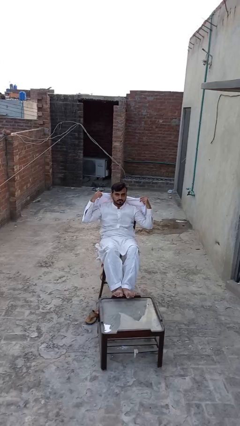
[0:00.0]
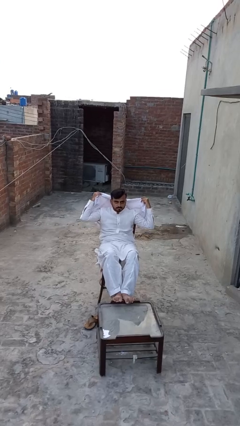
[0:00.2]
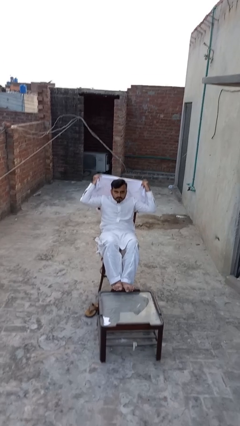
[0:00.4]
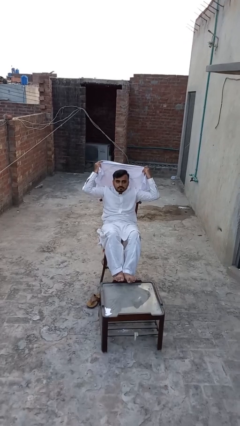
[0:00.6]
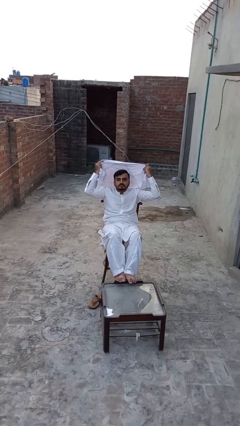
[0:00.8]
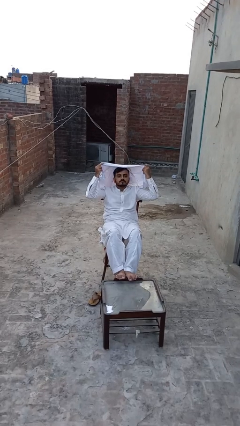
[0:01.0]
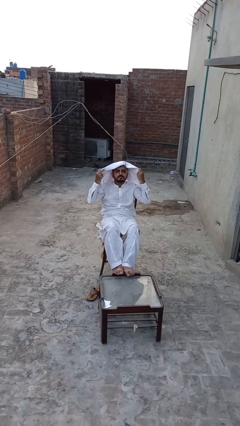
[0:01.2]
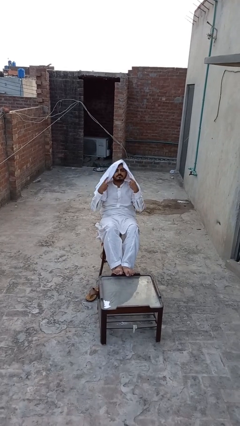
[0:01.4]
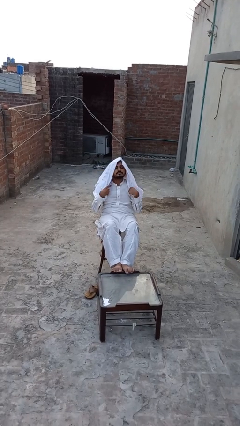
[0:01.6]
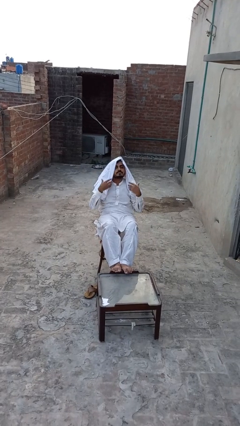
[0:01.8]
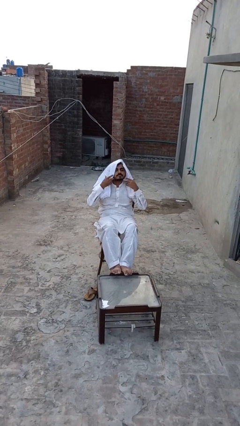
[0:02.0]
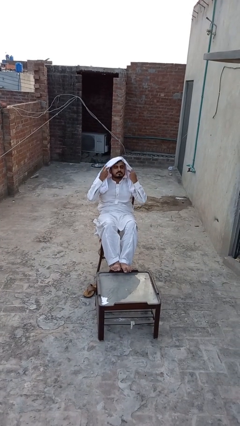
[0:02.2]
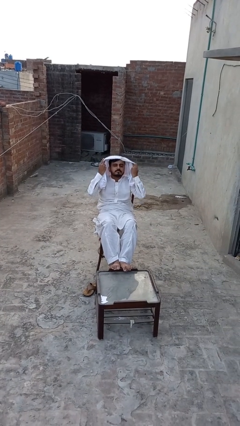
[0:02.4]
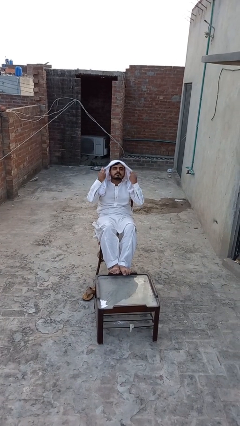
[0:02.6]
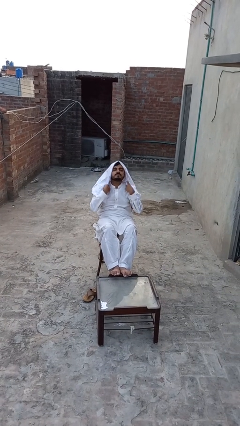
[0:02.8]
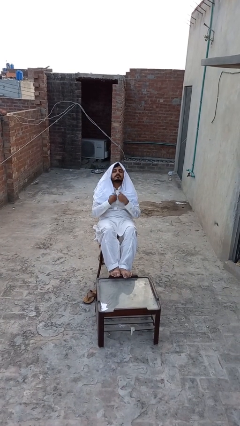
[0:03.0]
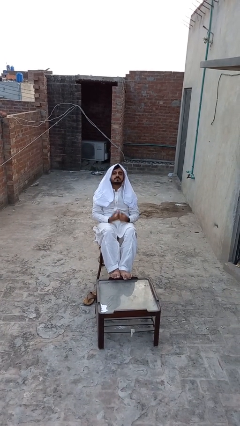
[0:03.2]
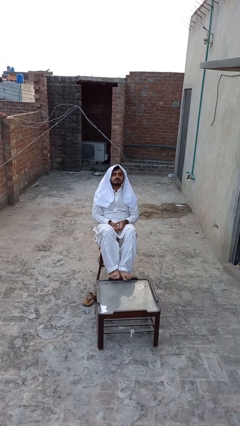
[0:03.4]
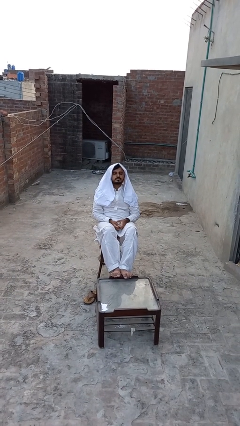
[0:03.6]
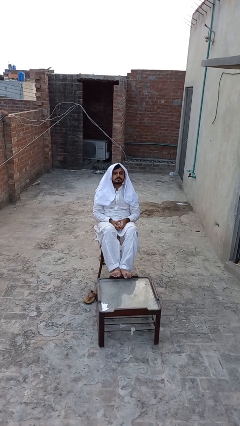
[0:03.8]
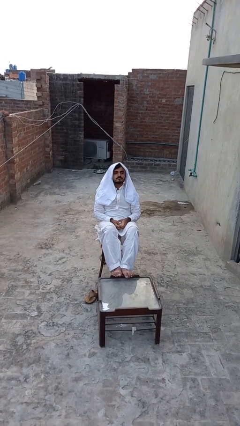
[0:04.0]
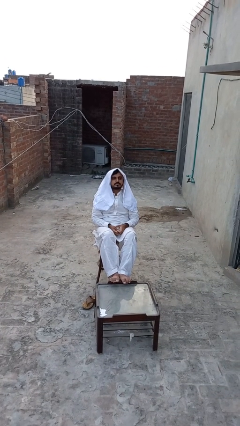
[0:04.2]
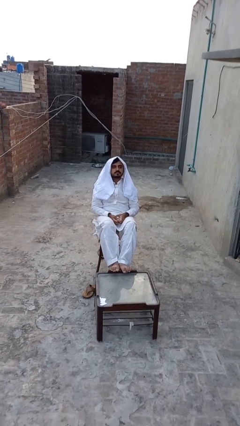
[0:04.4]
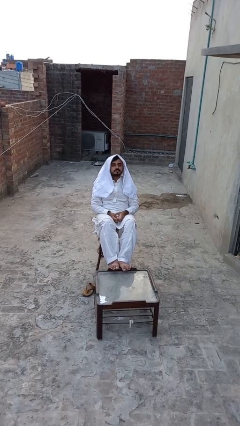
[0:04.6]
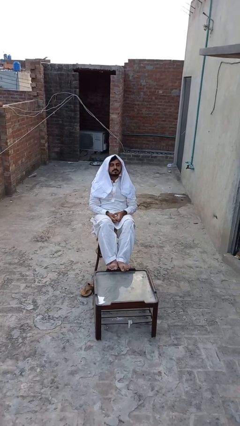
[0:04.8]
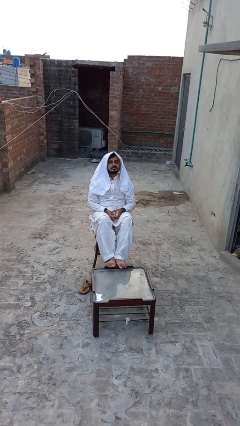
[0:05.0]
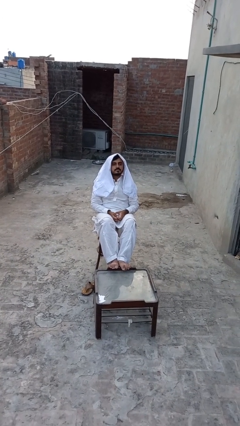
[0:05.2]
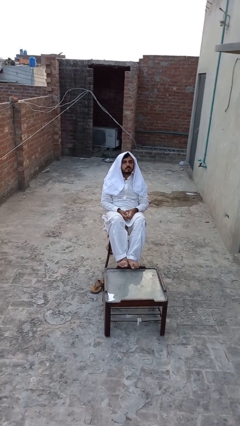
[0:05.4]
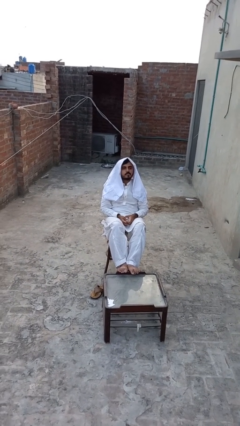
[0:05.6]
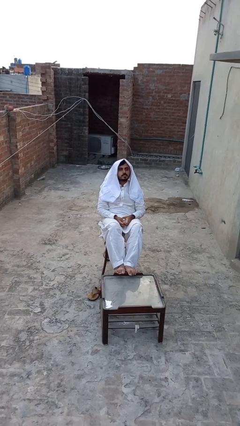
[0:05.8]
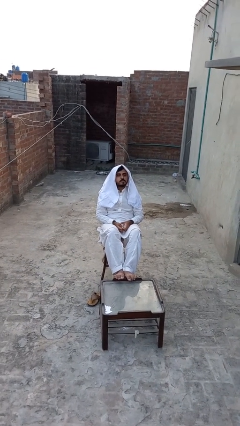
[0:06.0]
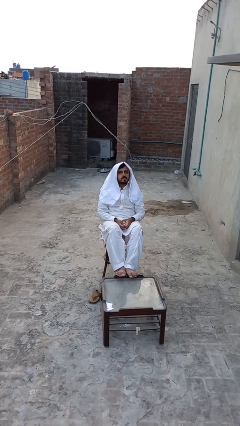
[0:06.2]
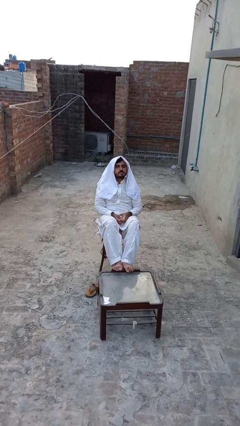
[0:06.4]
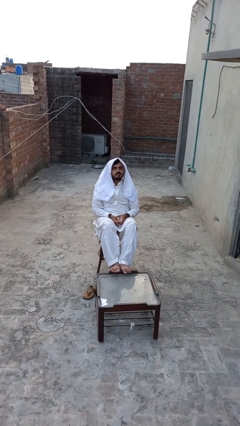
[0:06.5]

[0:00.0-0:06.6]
person puts on scarf

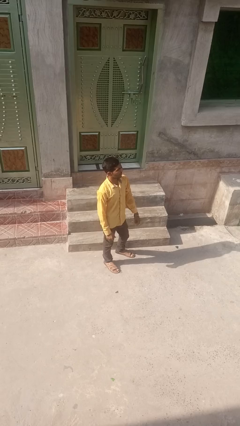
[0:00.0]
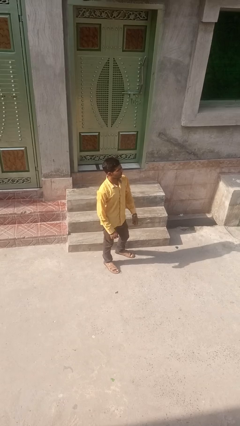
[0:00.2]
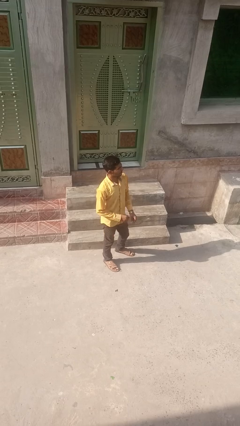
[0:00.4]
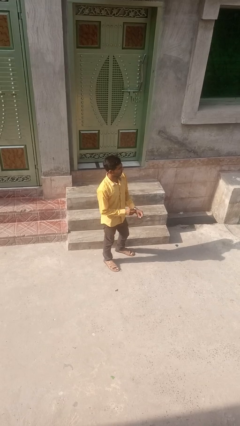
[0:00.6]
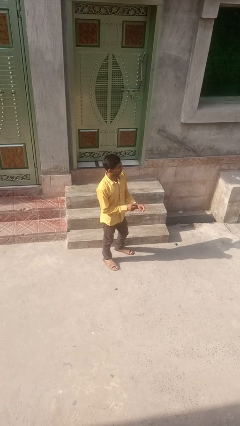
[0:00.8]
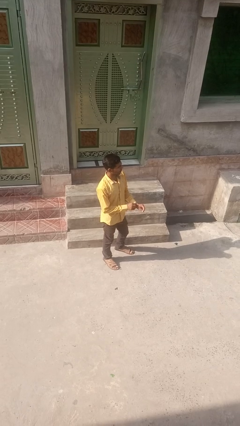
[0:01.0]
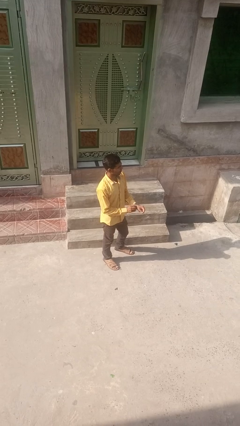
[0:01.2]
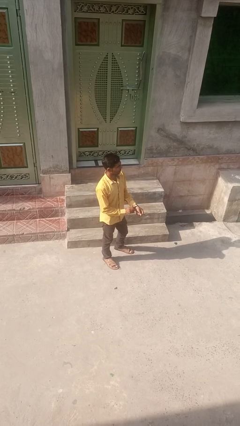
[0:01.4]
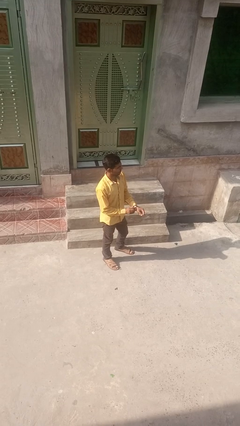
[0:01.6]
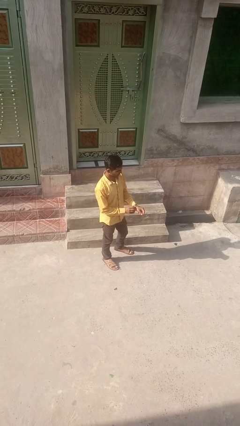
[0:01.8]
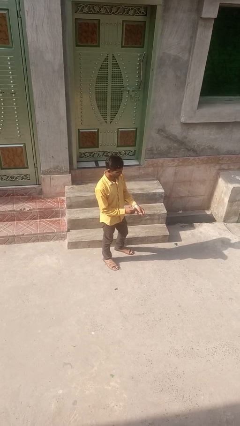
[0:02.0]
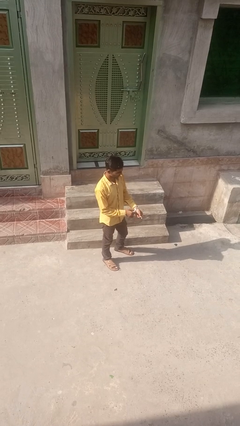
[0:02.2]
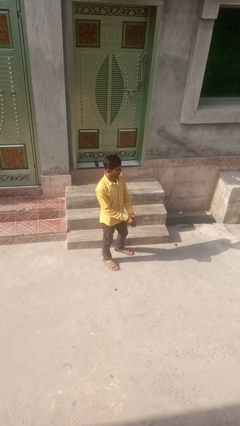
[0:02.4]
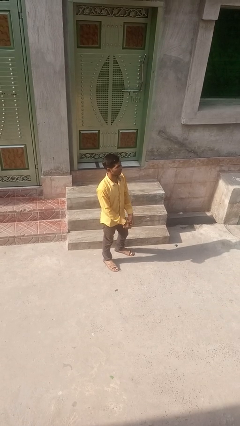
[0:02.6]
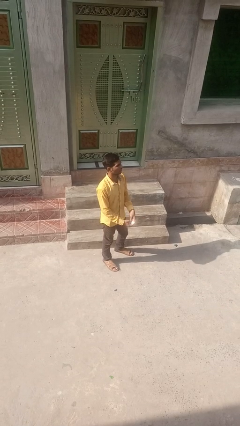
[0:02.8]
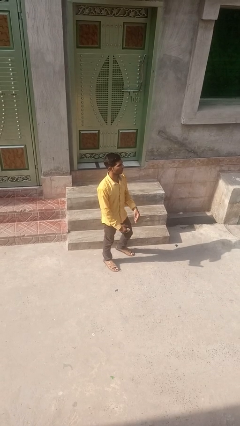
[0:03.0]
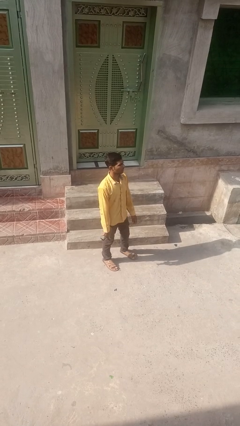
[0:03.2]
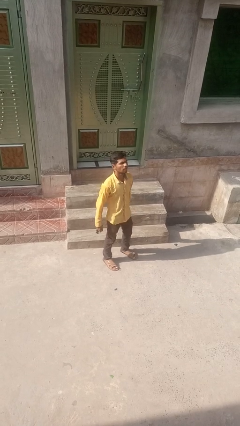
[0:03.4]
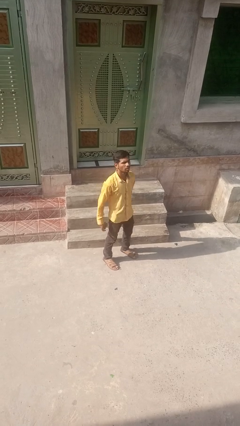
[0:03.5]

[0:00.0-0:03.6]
person takes off wristwatch

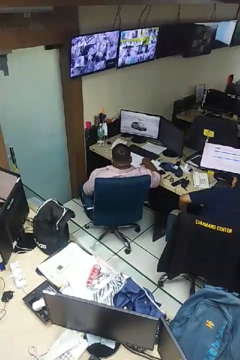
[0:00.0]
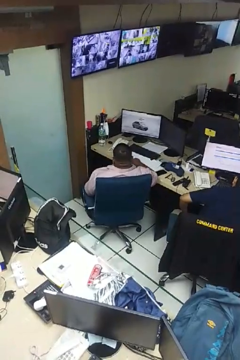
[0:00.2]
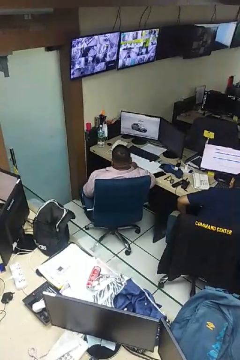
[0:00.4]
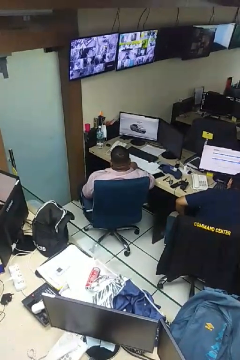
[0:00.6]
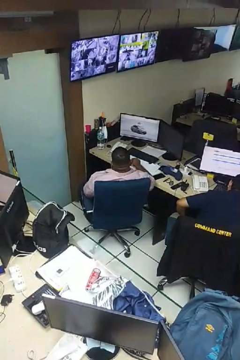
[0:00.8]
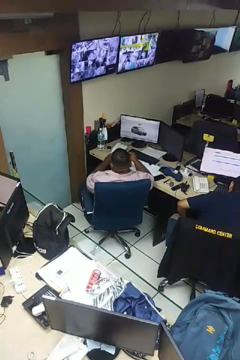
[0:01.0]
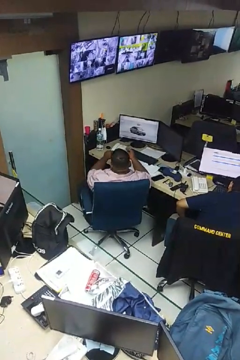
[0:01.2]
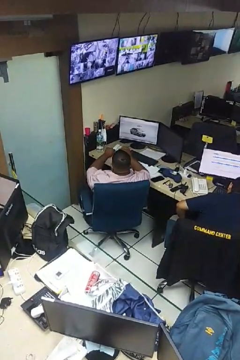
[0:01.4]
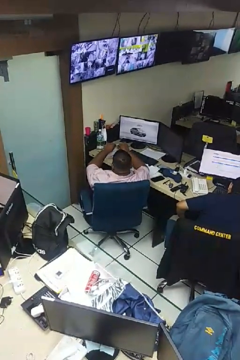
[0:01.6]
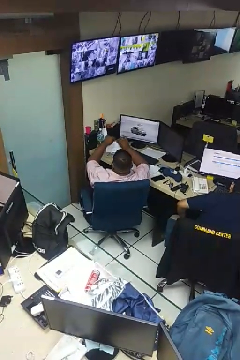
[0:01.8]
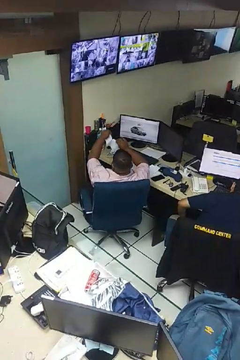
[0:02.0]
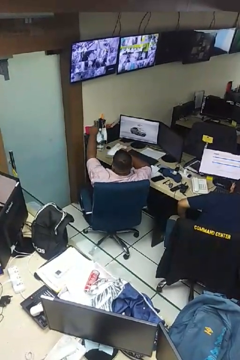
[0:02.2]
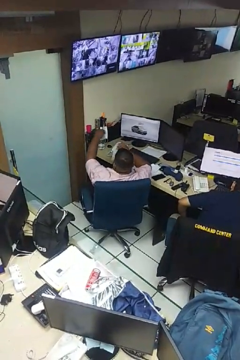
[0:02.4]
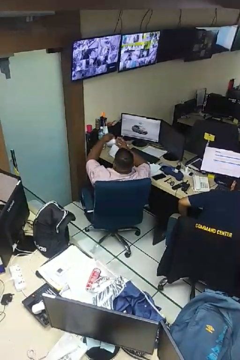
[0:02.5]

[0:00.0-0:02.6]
person tears paper

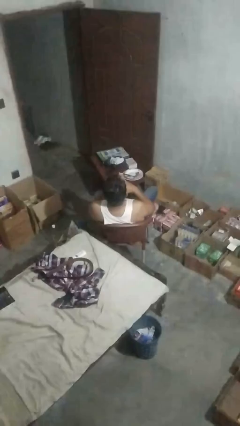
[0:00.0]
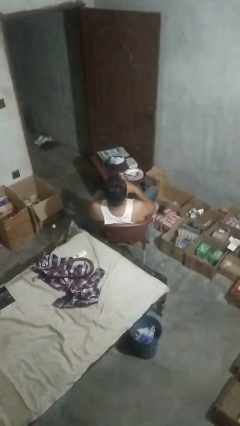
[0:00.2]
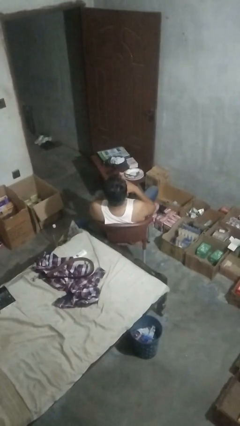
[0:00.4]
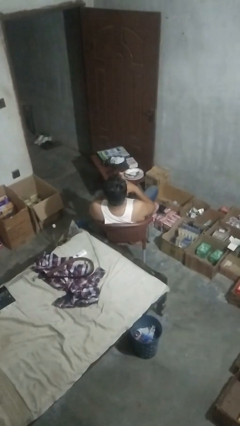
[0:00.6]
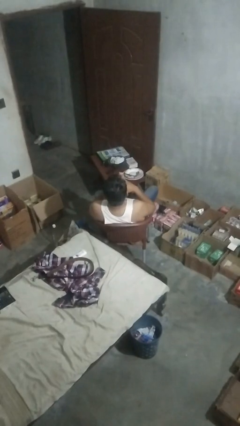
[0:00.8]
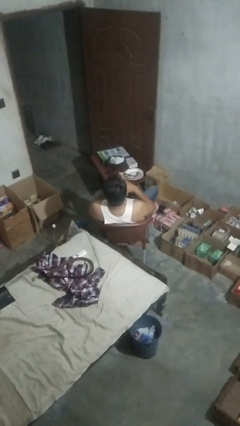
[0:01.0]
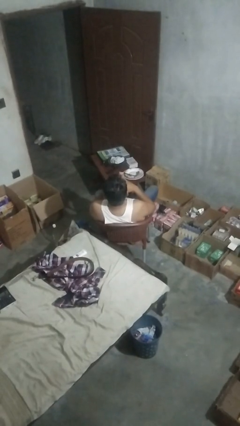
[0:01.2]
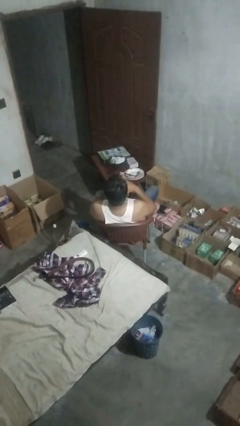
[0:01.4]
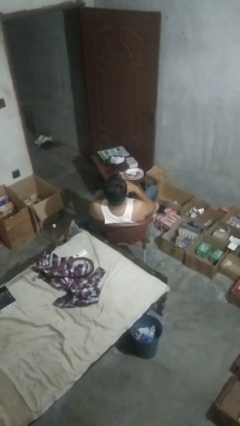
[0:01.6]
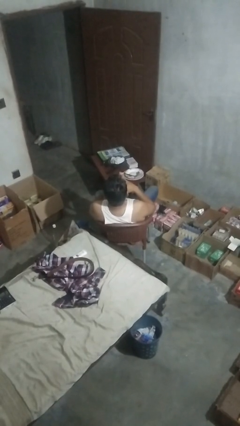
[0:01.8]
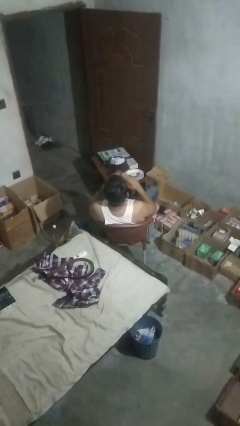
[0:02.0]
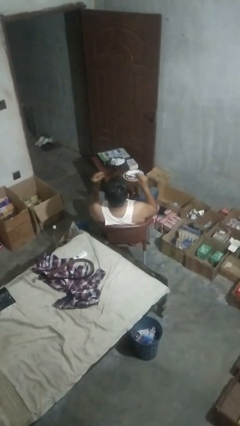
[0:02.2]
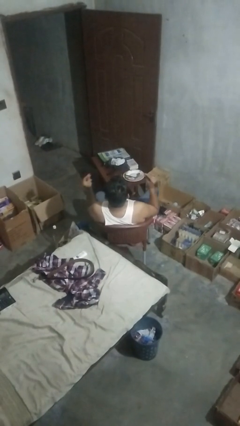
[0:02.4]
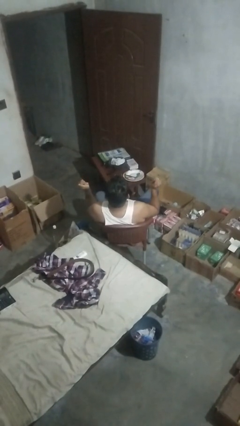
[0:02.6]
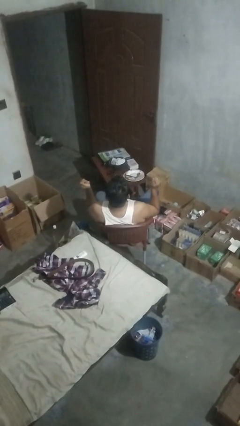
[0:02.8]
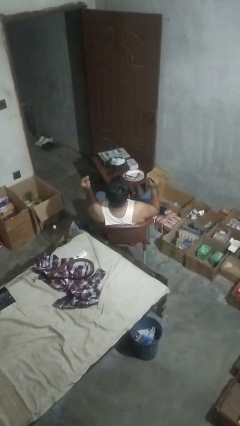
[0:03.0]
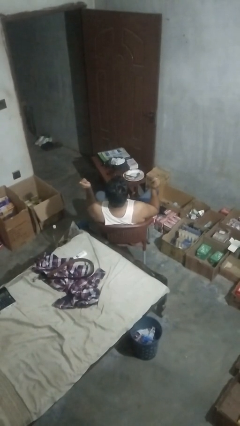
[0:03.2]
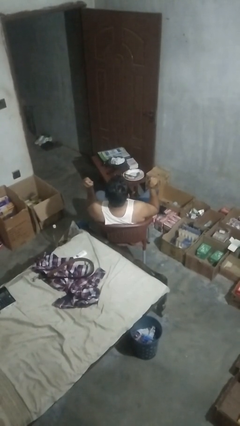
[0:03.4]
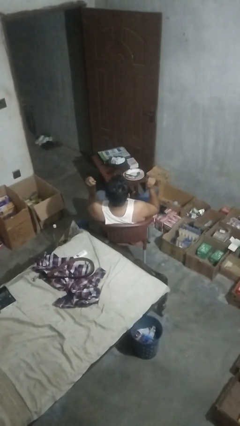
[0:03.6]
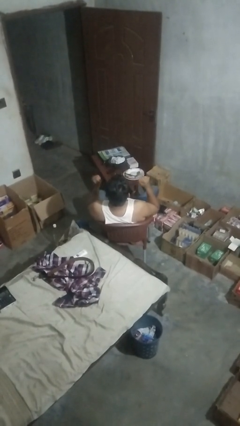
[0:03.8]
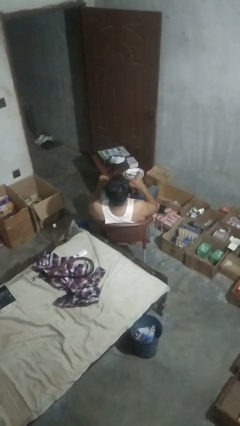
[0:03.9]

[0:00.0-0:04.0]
person snaps fingers

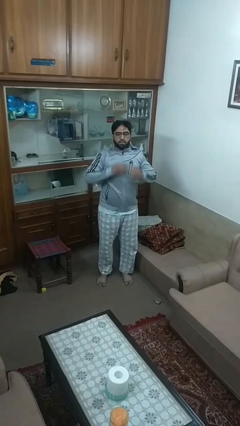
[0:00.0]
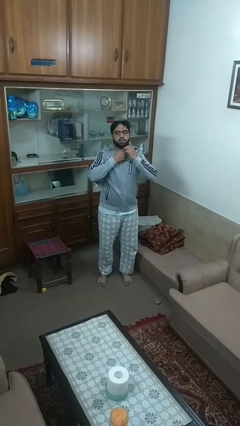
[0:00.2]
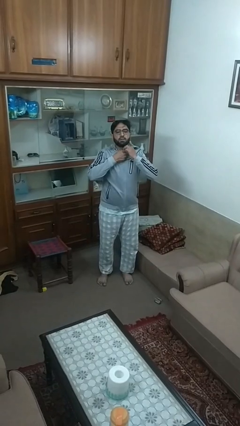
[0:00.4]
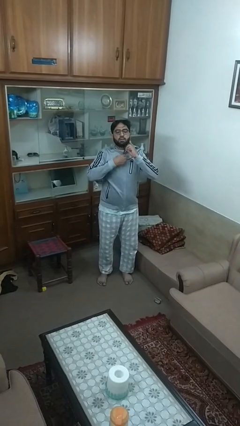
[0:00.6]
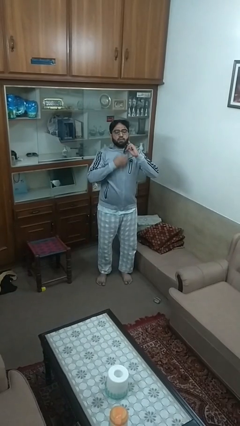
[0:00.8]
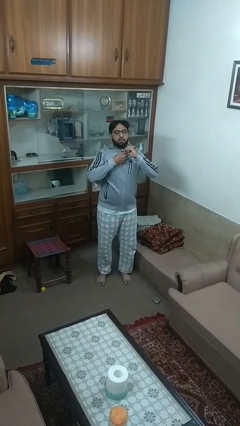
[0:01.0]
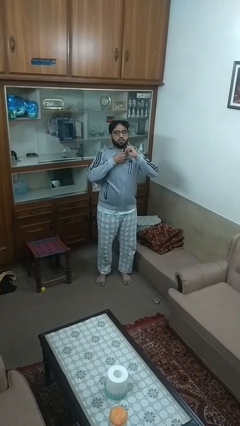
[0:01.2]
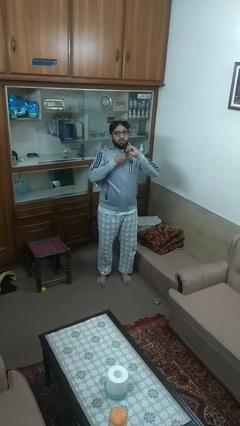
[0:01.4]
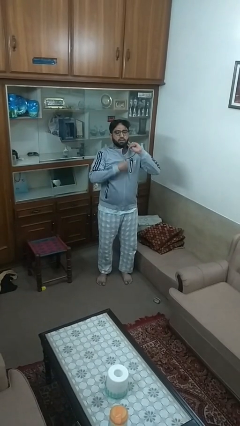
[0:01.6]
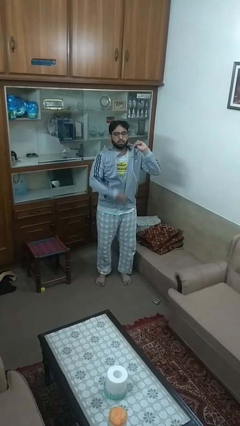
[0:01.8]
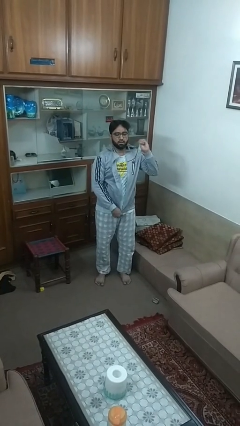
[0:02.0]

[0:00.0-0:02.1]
person unzips jacket
